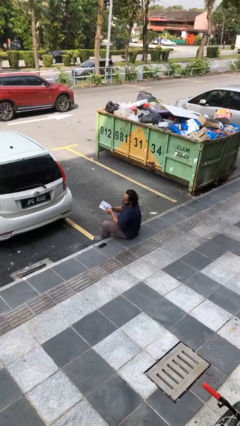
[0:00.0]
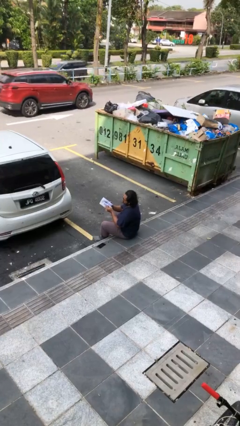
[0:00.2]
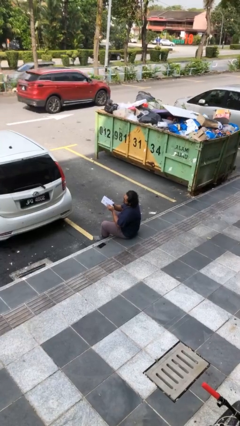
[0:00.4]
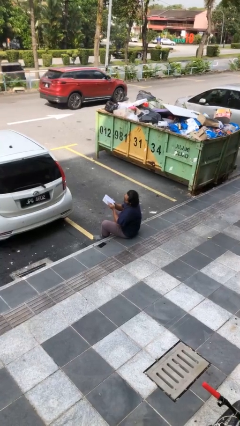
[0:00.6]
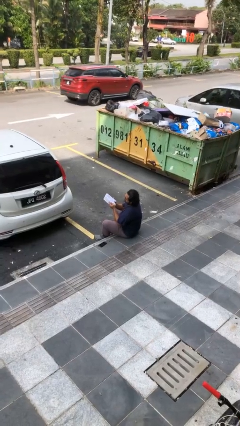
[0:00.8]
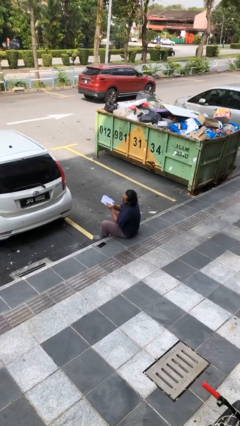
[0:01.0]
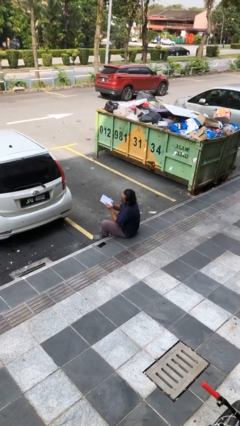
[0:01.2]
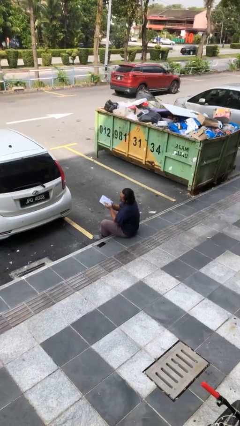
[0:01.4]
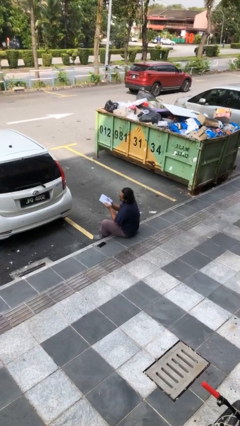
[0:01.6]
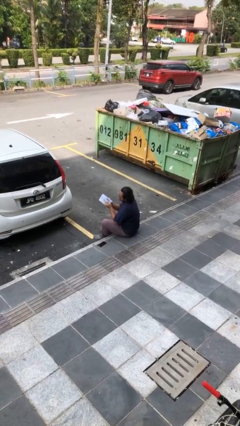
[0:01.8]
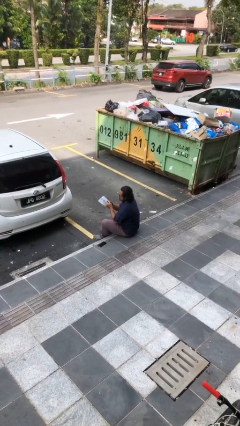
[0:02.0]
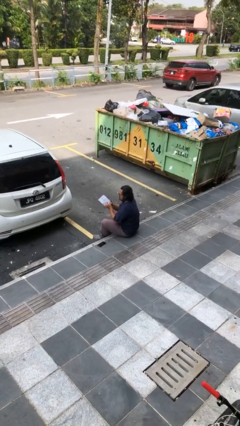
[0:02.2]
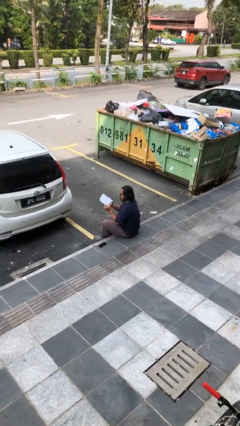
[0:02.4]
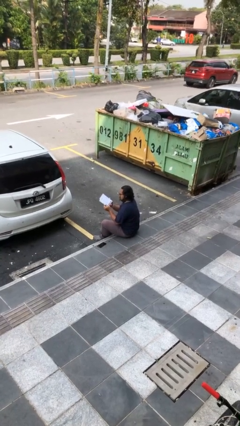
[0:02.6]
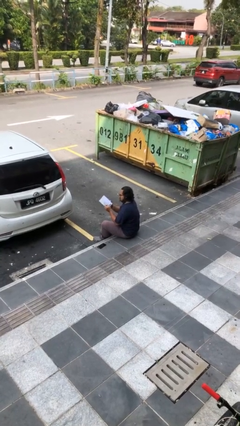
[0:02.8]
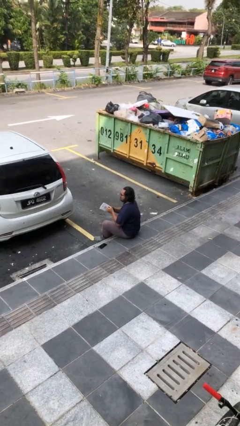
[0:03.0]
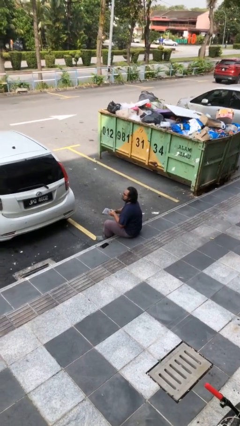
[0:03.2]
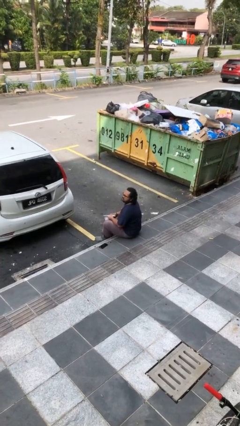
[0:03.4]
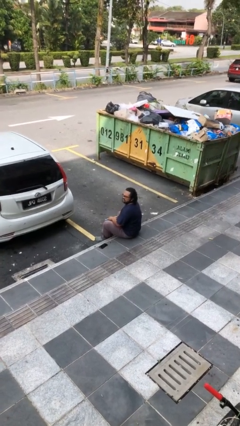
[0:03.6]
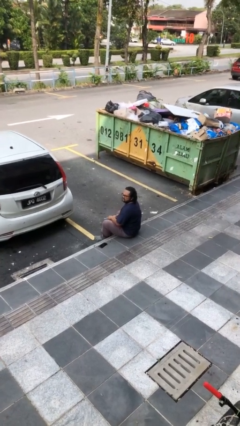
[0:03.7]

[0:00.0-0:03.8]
person reads document

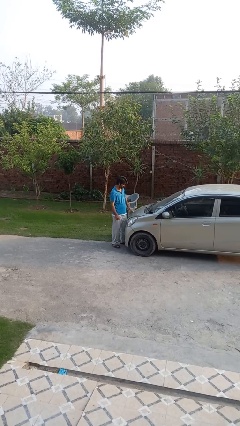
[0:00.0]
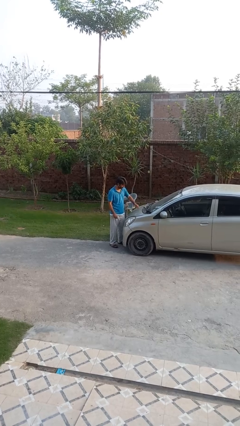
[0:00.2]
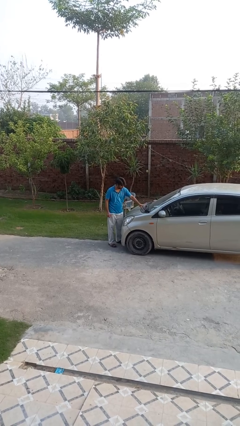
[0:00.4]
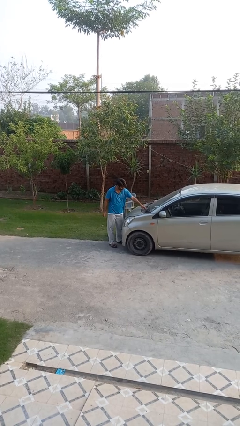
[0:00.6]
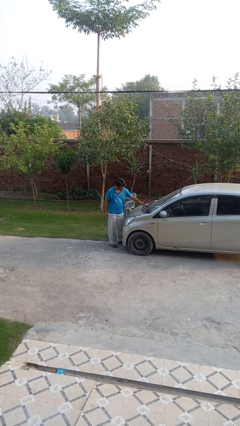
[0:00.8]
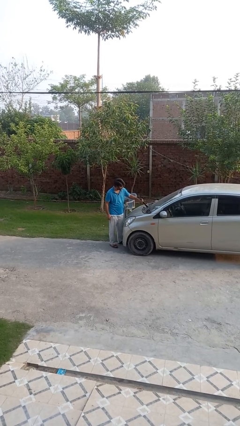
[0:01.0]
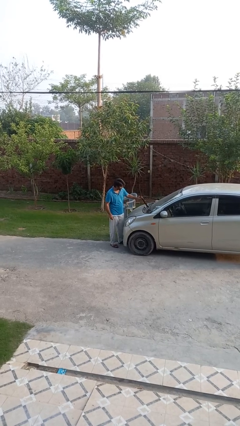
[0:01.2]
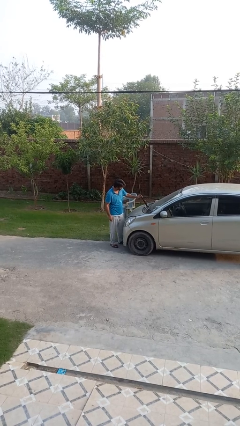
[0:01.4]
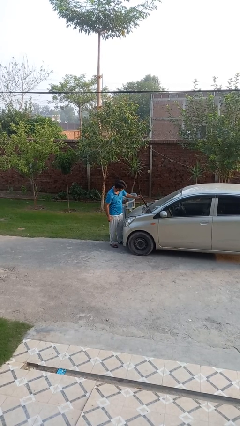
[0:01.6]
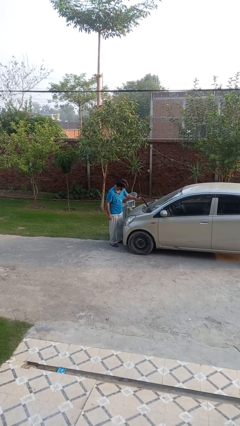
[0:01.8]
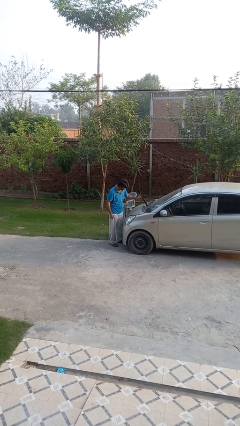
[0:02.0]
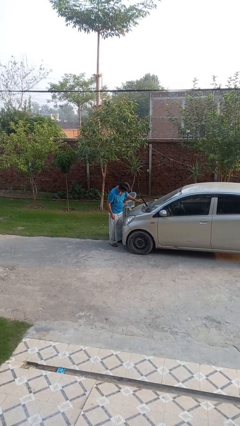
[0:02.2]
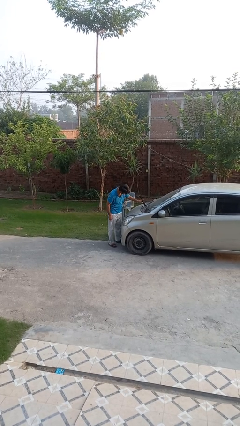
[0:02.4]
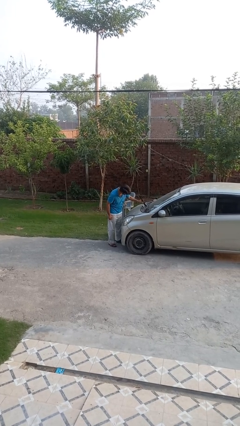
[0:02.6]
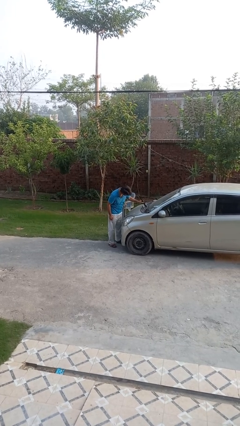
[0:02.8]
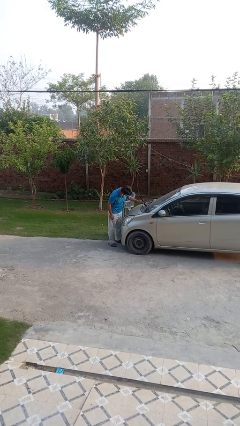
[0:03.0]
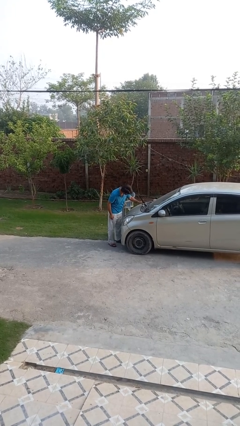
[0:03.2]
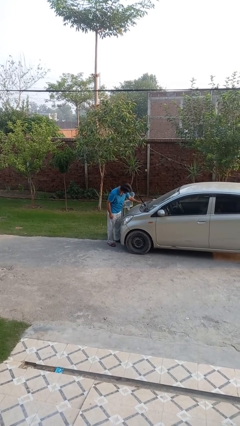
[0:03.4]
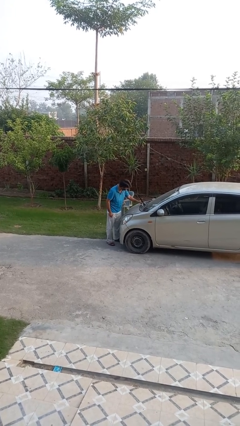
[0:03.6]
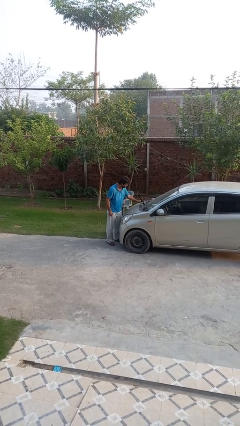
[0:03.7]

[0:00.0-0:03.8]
person flips up car wipers

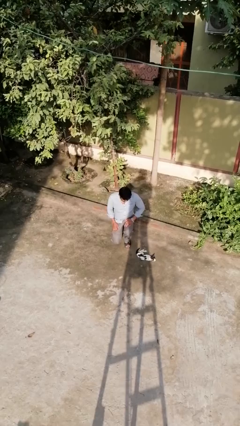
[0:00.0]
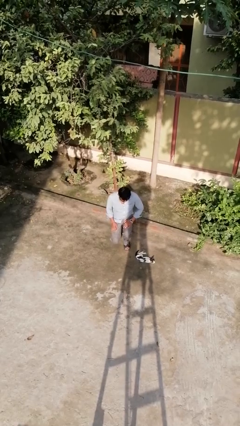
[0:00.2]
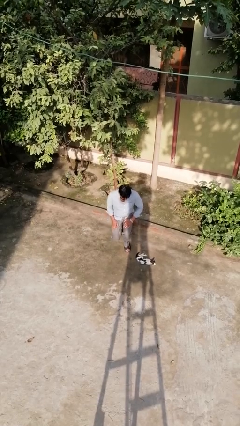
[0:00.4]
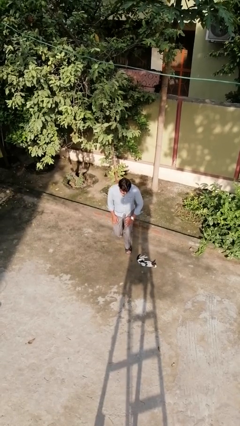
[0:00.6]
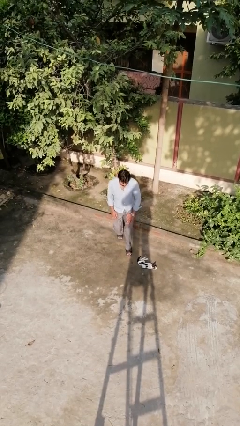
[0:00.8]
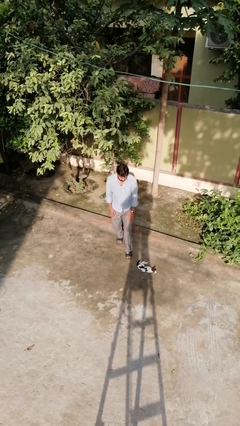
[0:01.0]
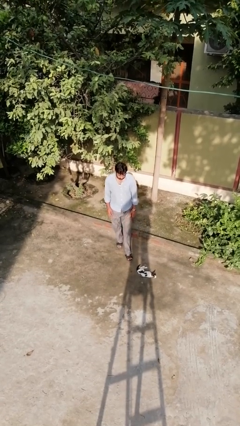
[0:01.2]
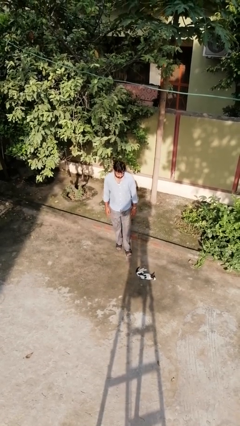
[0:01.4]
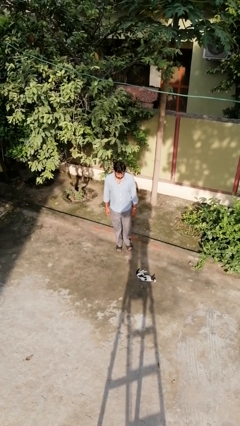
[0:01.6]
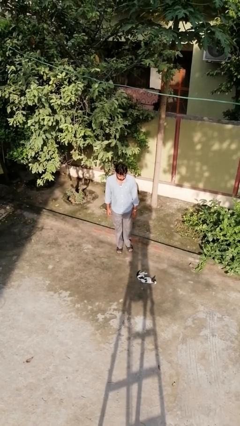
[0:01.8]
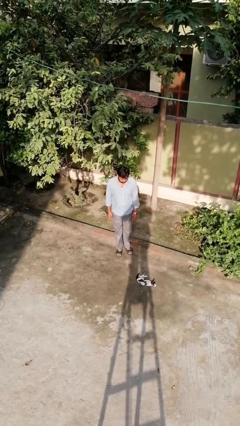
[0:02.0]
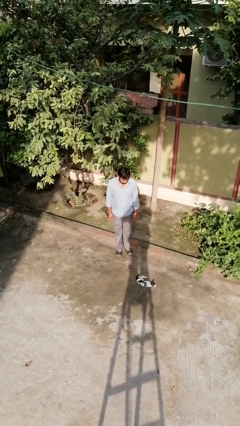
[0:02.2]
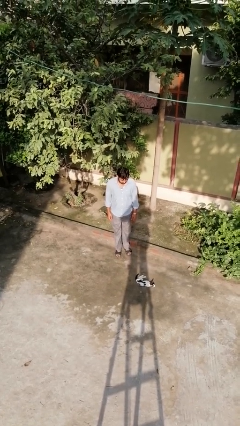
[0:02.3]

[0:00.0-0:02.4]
person stands up from floor

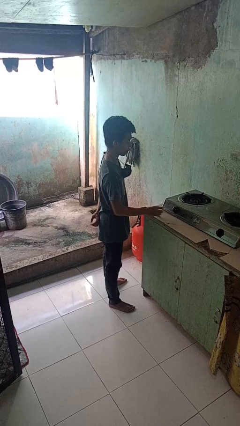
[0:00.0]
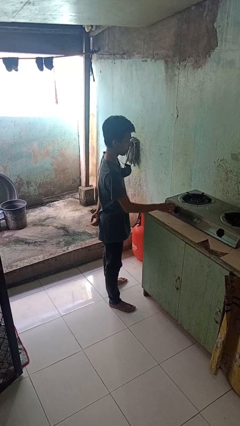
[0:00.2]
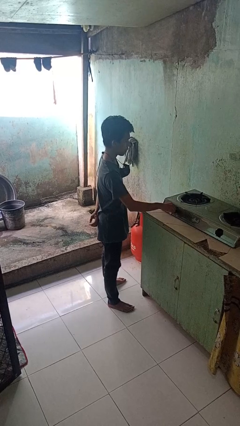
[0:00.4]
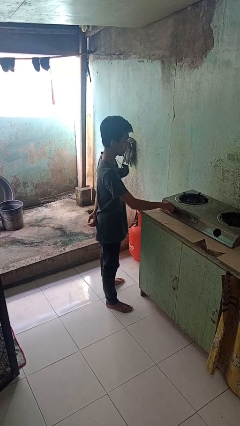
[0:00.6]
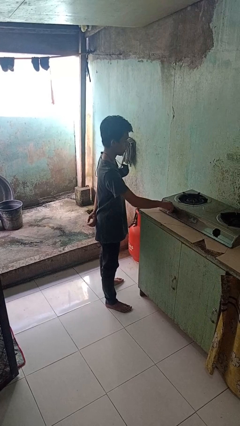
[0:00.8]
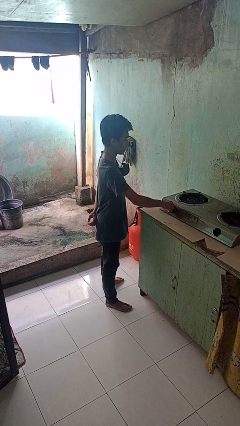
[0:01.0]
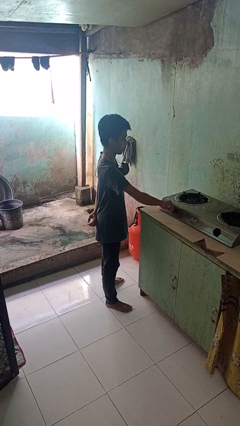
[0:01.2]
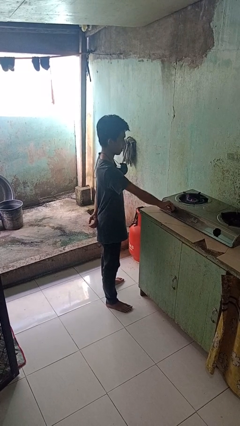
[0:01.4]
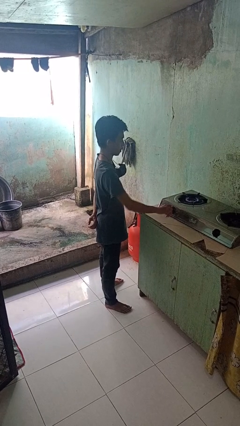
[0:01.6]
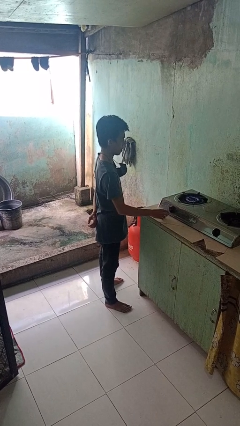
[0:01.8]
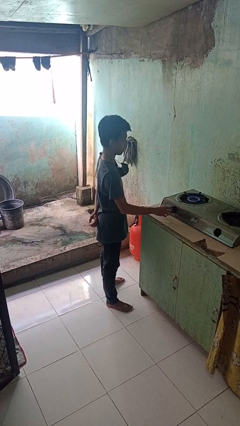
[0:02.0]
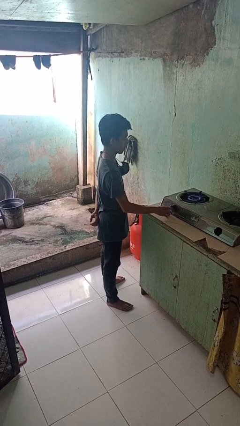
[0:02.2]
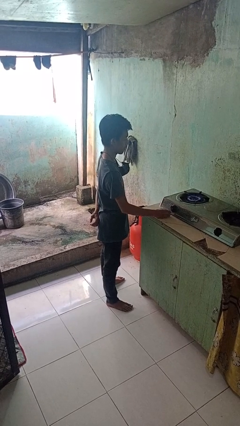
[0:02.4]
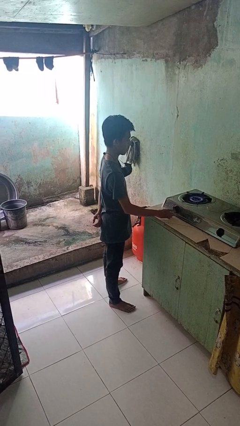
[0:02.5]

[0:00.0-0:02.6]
person turns on stovetop

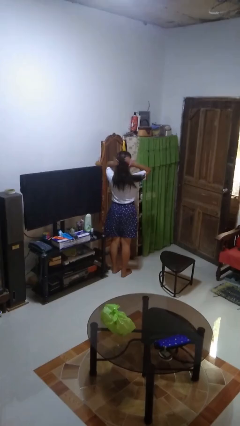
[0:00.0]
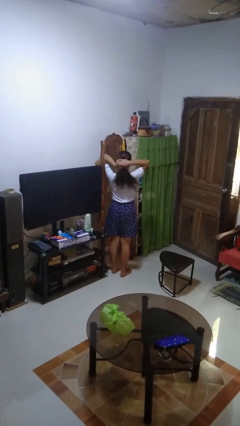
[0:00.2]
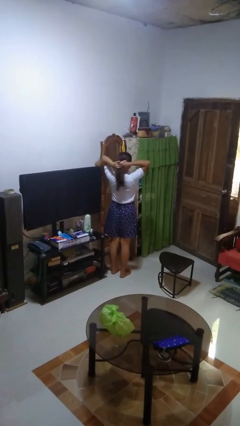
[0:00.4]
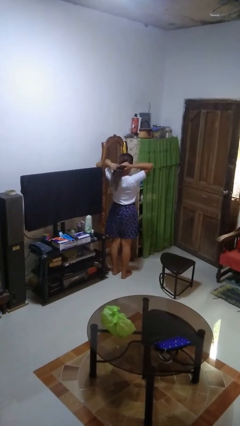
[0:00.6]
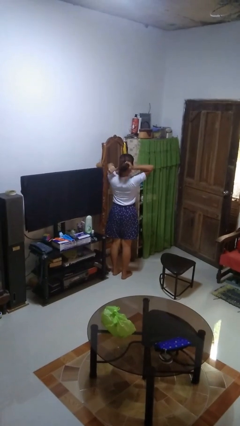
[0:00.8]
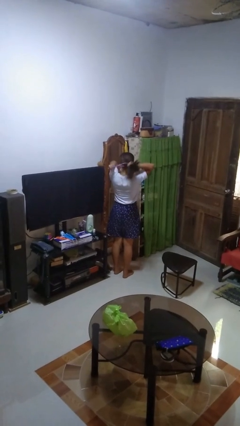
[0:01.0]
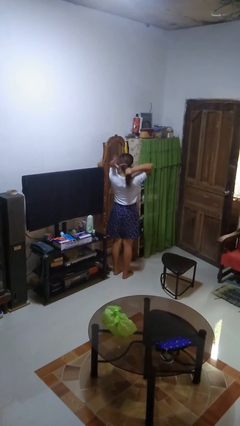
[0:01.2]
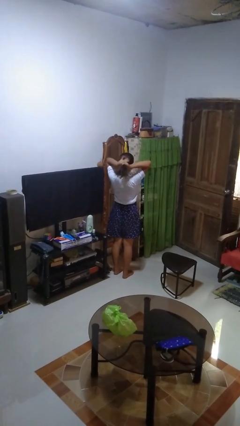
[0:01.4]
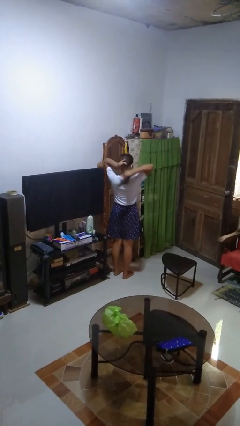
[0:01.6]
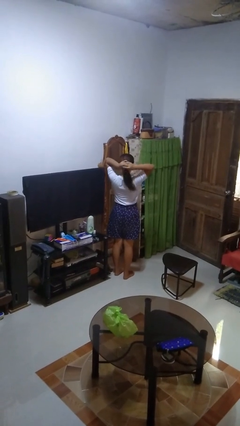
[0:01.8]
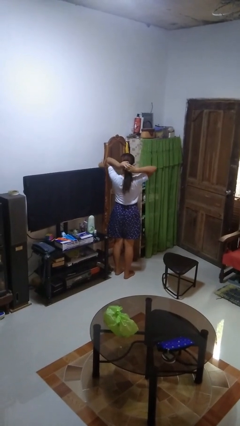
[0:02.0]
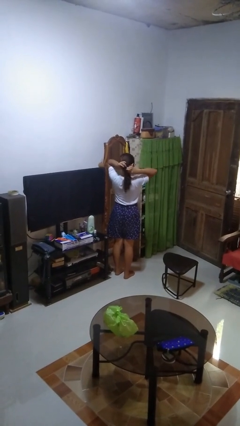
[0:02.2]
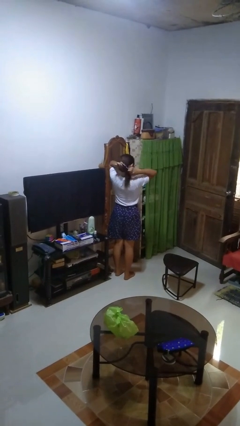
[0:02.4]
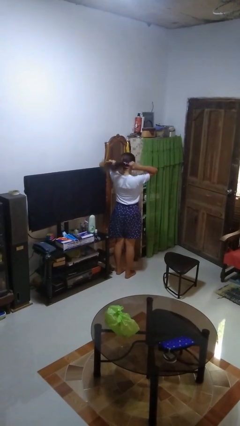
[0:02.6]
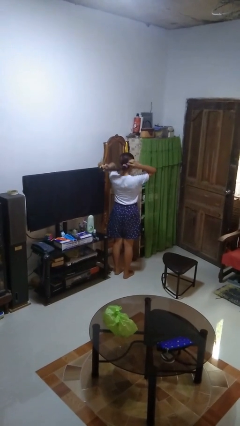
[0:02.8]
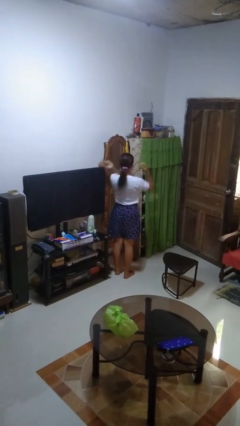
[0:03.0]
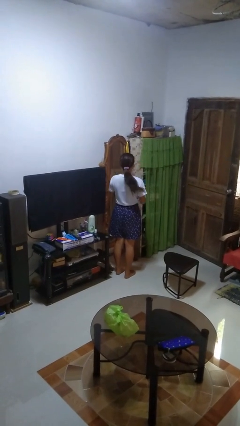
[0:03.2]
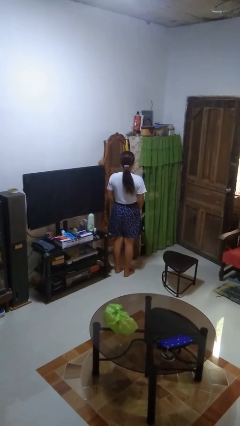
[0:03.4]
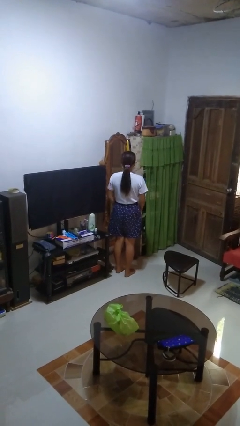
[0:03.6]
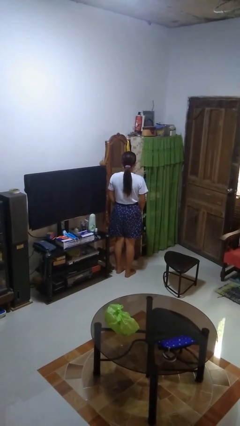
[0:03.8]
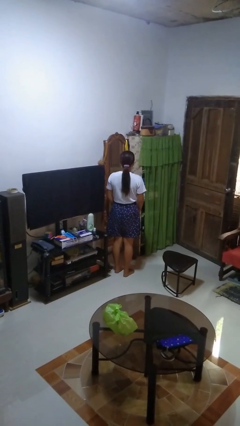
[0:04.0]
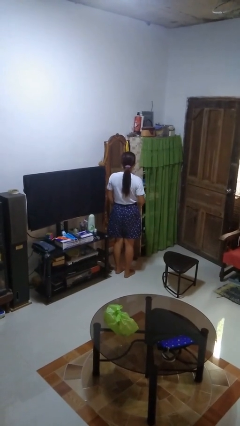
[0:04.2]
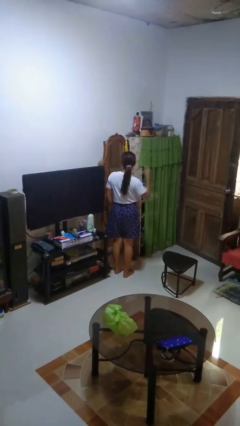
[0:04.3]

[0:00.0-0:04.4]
person puts hair in ponytail

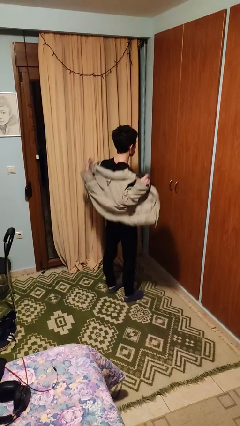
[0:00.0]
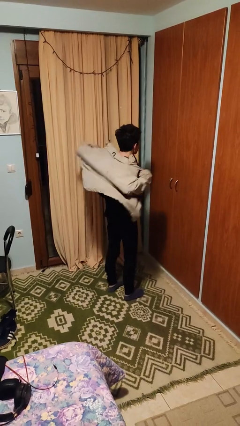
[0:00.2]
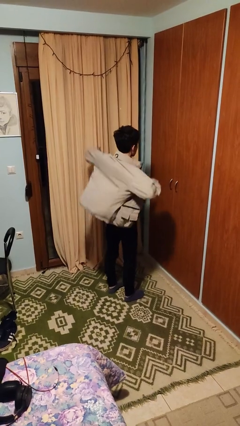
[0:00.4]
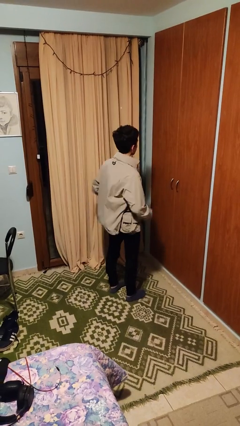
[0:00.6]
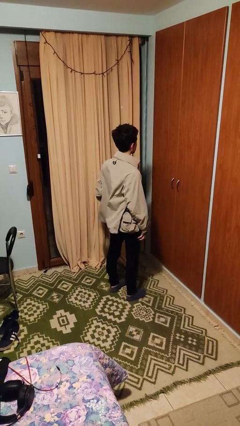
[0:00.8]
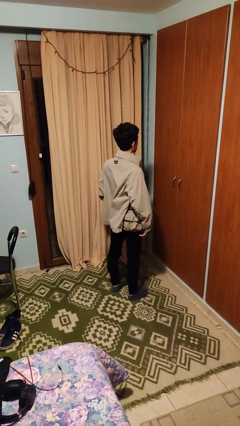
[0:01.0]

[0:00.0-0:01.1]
person puts on jacket
